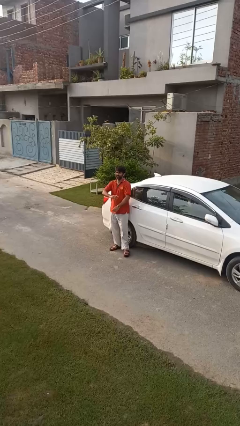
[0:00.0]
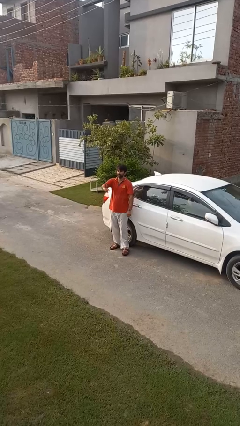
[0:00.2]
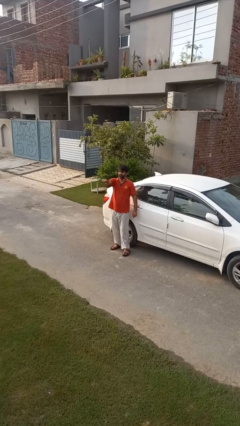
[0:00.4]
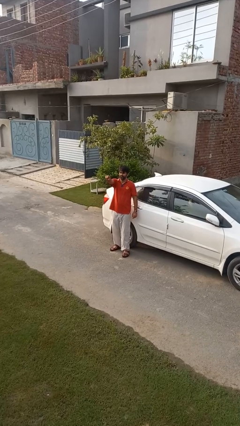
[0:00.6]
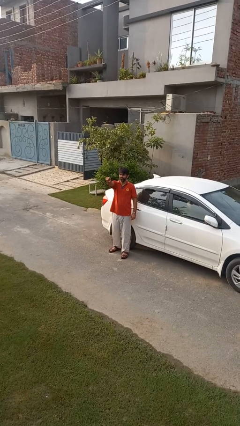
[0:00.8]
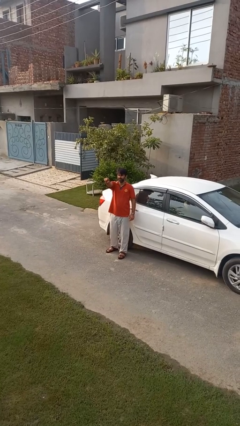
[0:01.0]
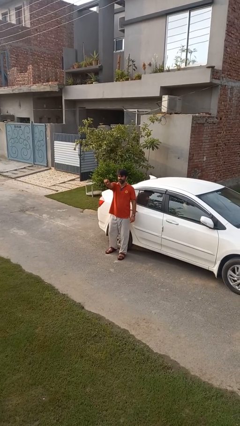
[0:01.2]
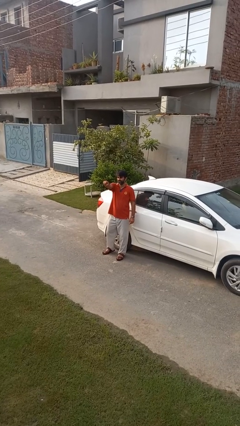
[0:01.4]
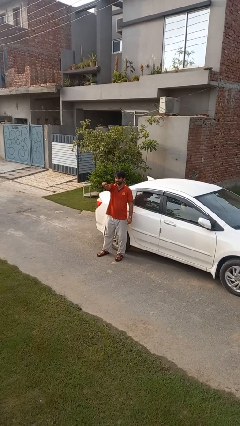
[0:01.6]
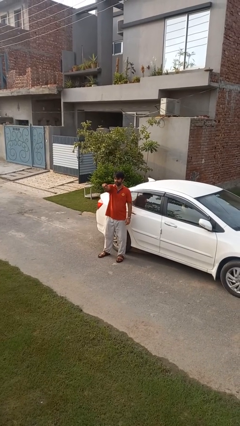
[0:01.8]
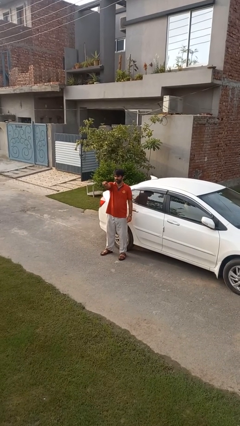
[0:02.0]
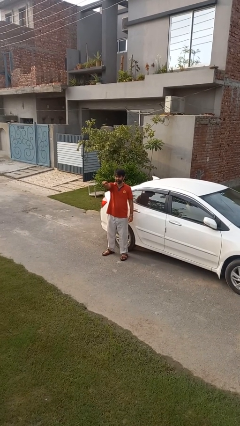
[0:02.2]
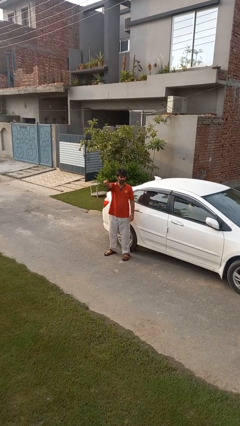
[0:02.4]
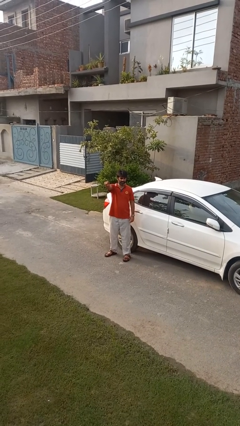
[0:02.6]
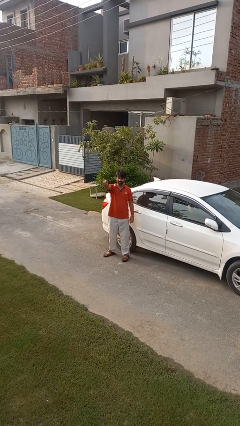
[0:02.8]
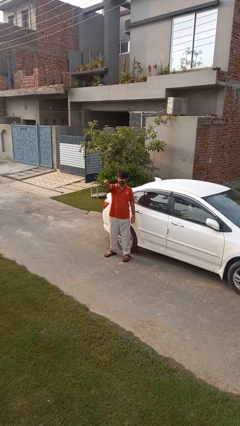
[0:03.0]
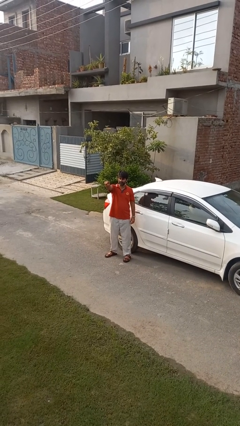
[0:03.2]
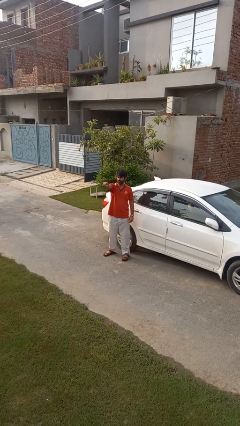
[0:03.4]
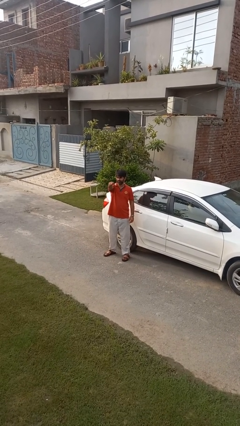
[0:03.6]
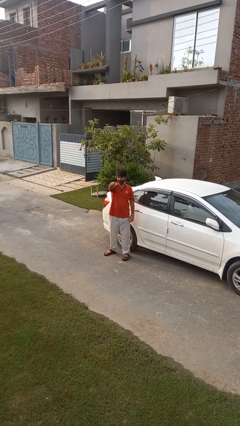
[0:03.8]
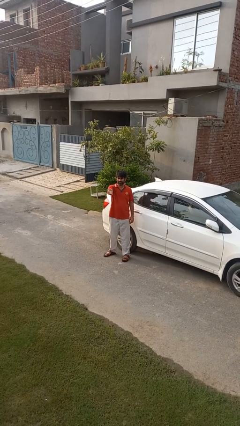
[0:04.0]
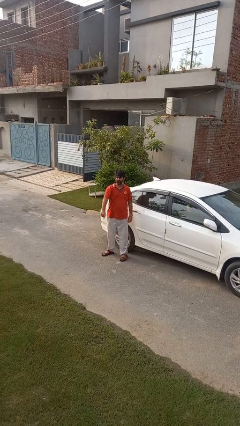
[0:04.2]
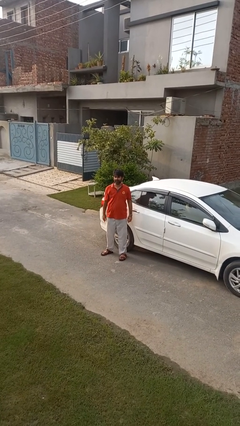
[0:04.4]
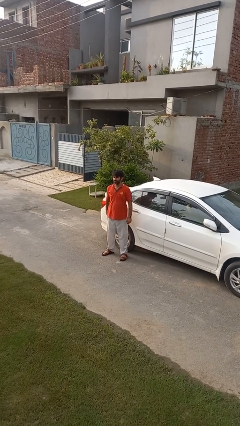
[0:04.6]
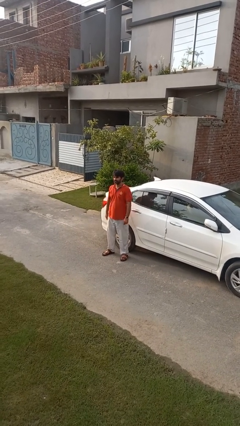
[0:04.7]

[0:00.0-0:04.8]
person points at person

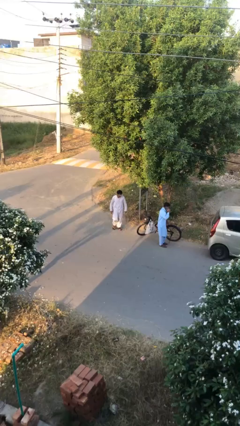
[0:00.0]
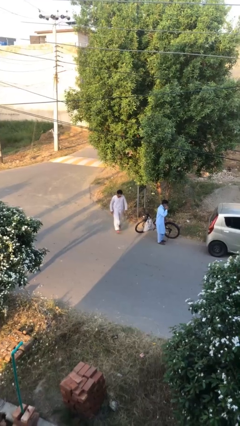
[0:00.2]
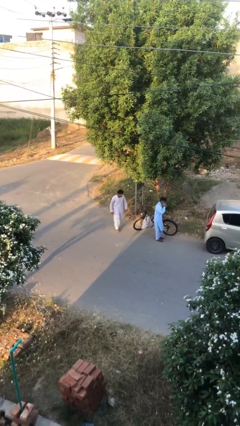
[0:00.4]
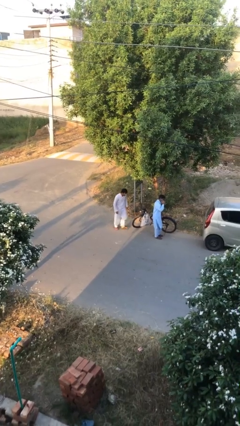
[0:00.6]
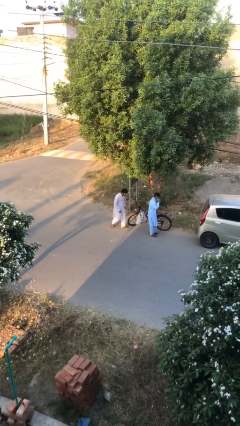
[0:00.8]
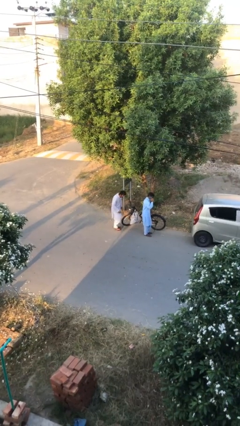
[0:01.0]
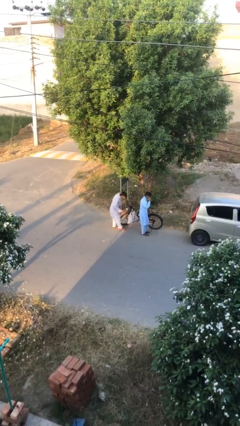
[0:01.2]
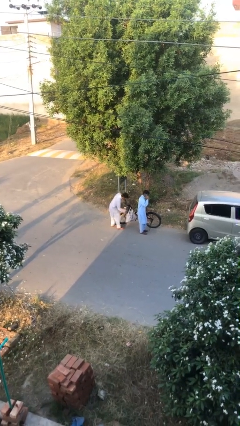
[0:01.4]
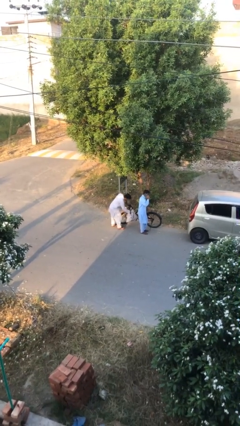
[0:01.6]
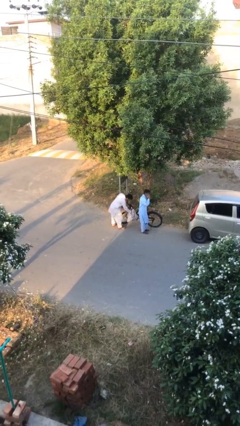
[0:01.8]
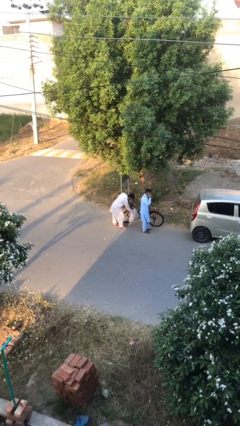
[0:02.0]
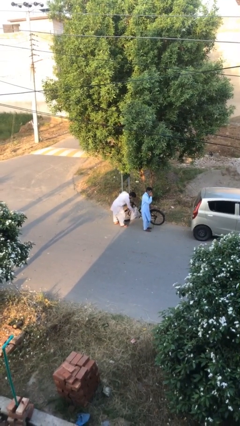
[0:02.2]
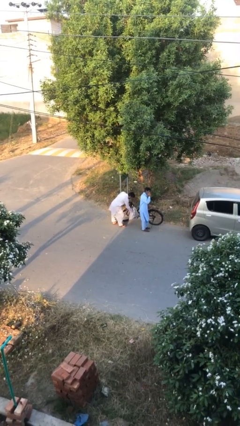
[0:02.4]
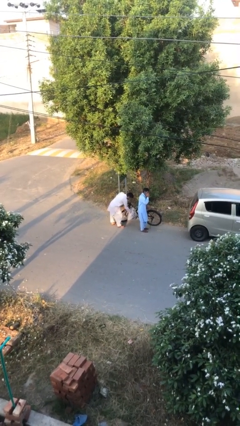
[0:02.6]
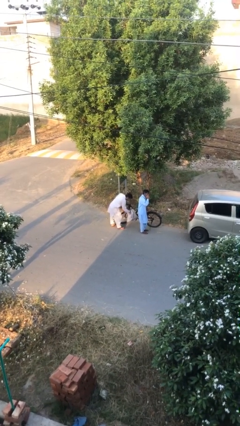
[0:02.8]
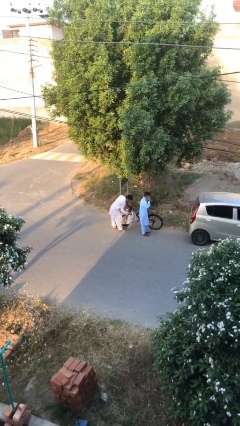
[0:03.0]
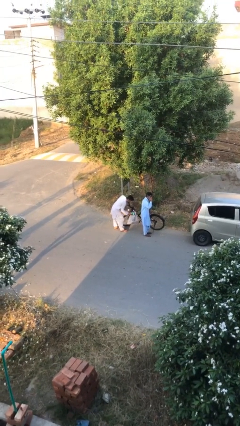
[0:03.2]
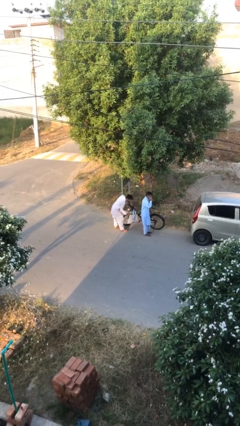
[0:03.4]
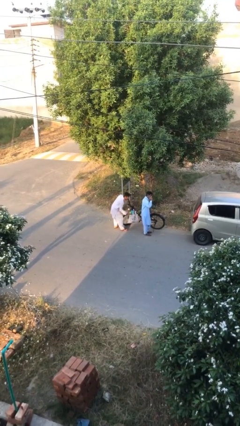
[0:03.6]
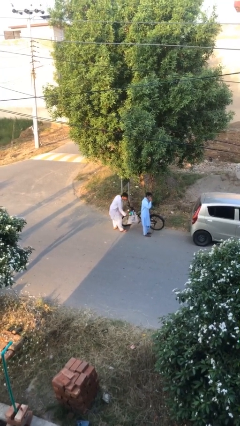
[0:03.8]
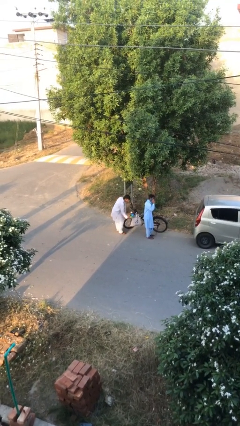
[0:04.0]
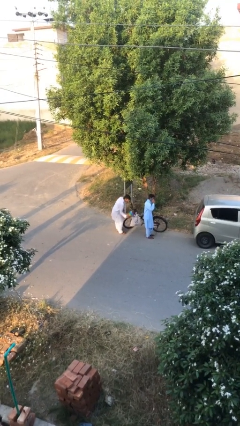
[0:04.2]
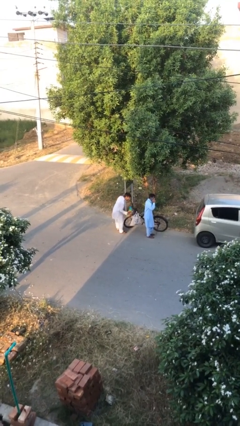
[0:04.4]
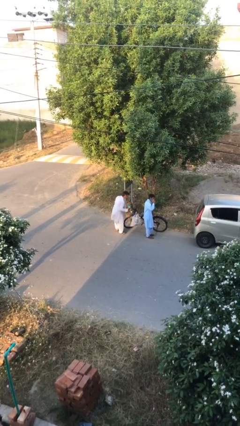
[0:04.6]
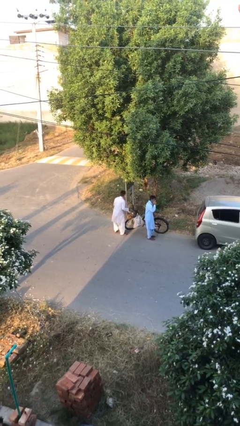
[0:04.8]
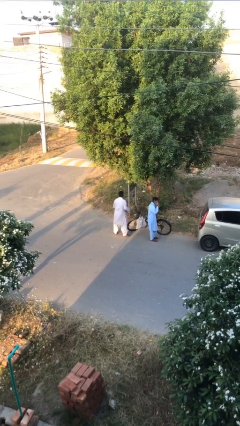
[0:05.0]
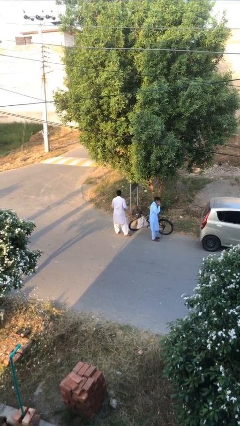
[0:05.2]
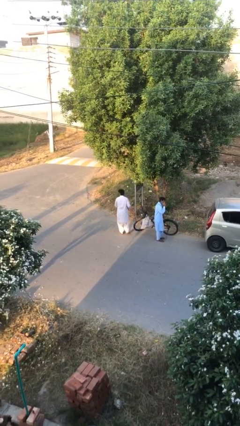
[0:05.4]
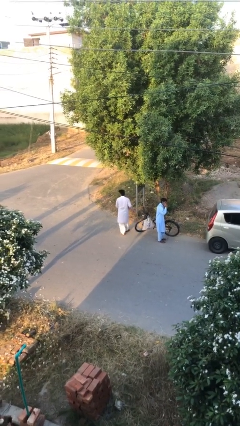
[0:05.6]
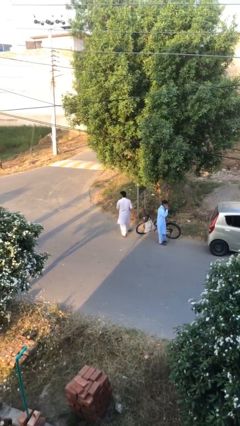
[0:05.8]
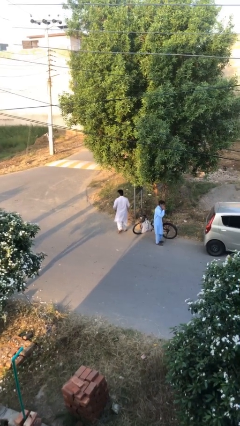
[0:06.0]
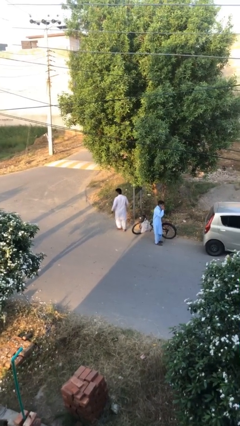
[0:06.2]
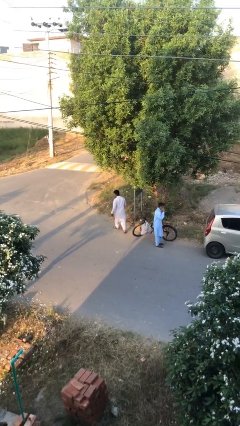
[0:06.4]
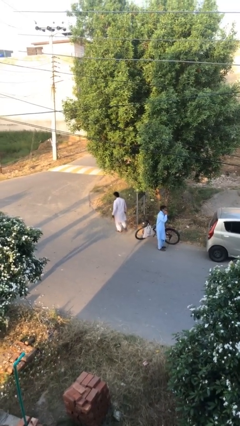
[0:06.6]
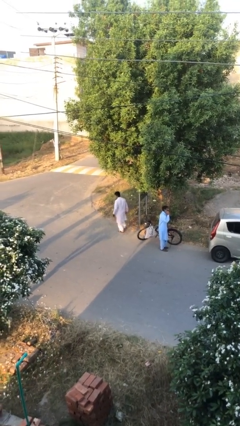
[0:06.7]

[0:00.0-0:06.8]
person steals object from person

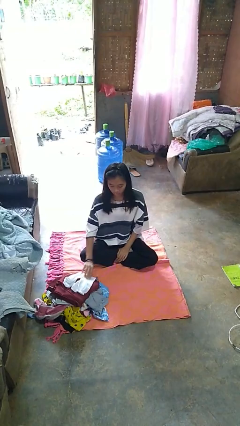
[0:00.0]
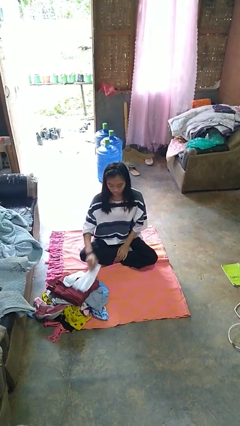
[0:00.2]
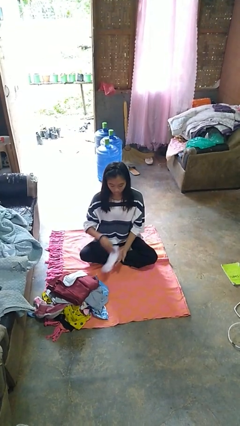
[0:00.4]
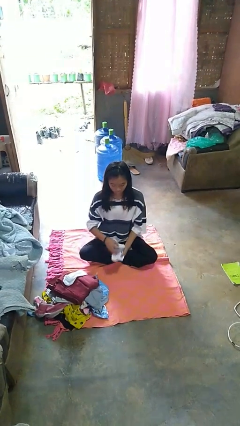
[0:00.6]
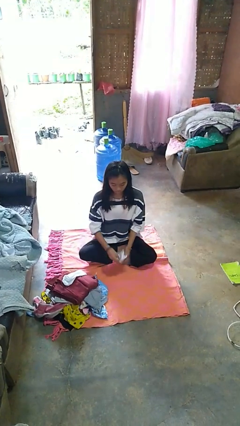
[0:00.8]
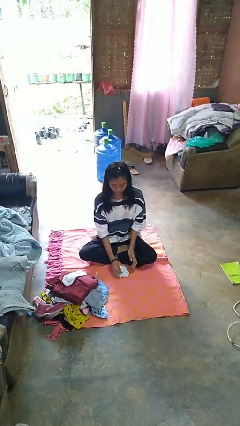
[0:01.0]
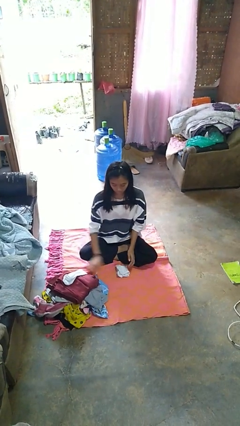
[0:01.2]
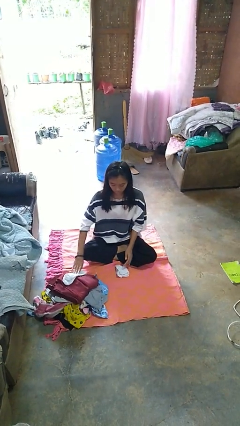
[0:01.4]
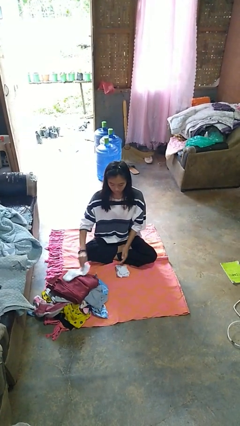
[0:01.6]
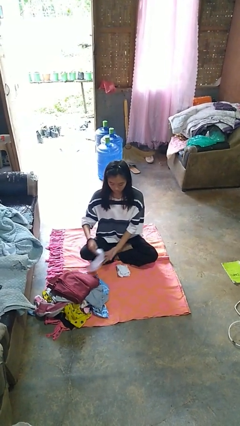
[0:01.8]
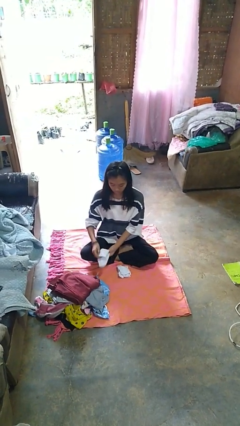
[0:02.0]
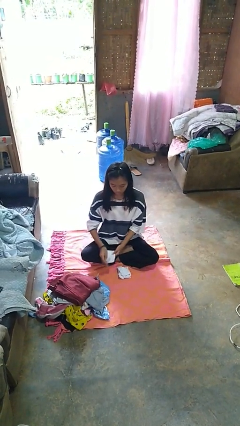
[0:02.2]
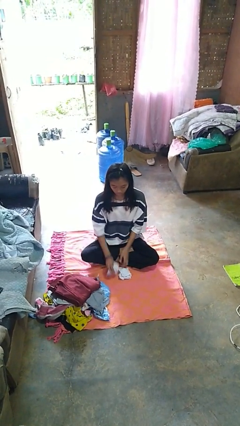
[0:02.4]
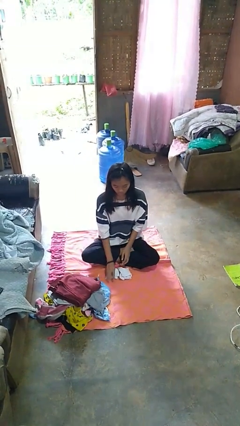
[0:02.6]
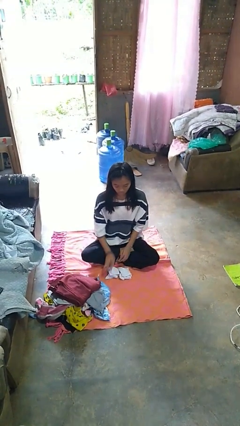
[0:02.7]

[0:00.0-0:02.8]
person folds socks

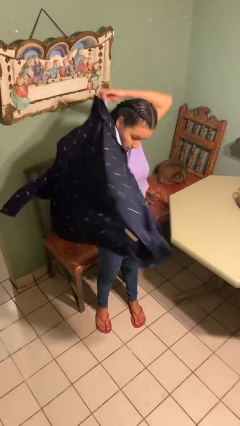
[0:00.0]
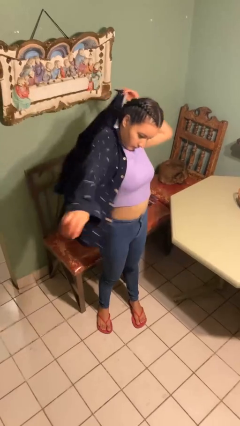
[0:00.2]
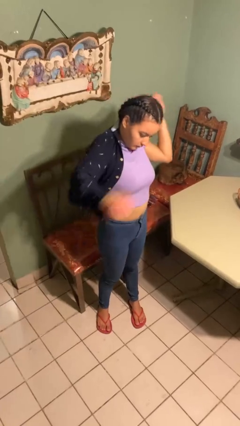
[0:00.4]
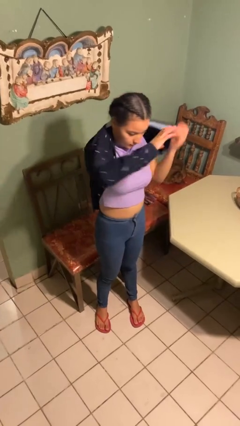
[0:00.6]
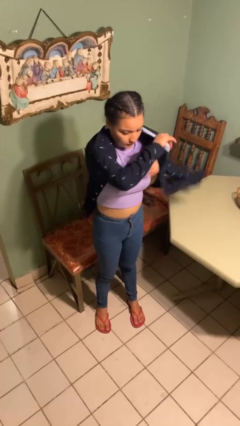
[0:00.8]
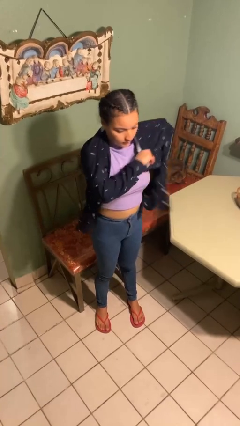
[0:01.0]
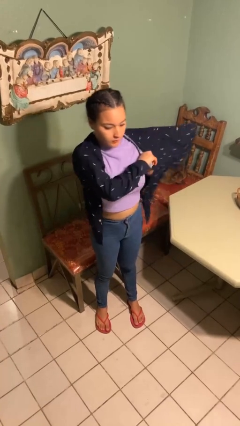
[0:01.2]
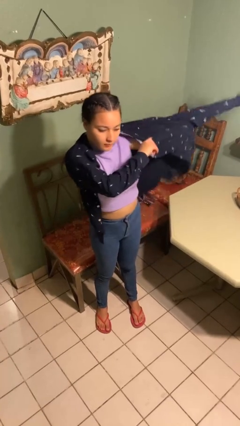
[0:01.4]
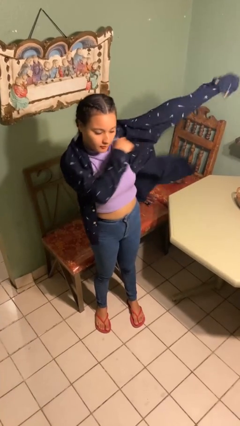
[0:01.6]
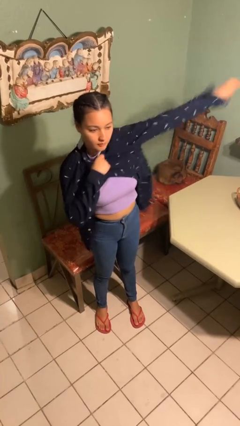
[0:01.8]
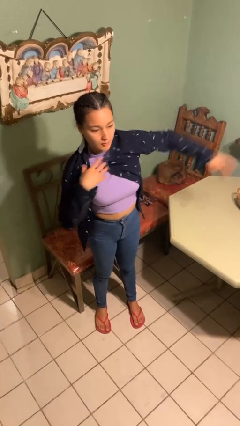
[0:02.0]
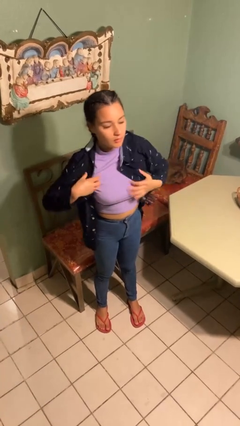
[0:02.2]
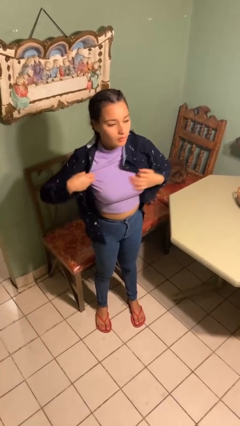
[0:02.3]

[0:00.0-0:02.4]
person puts on shirt

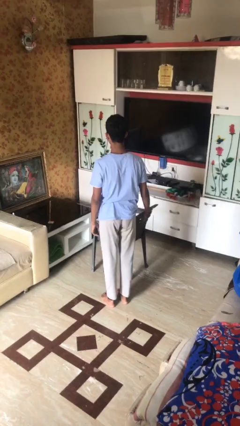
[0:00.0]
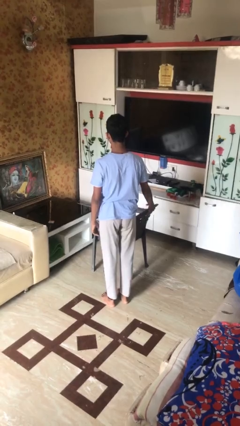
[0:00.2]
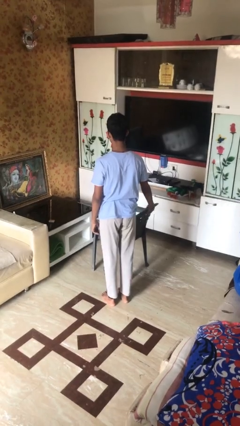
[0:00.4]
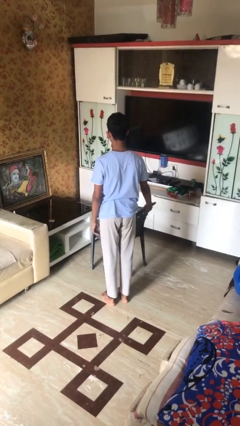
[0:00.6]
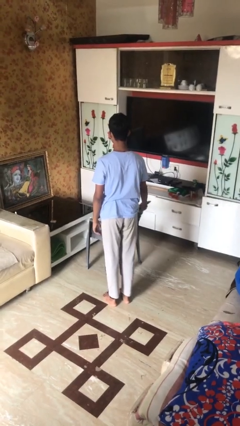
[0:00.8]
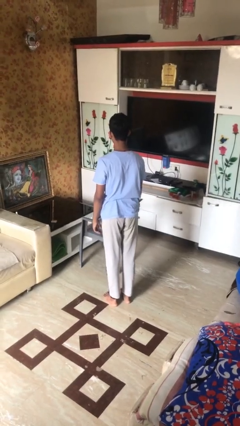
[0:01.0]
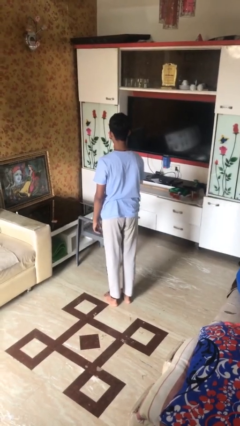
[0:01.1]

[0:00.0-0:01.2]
person pushes in chair
